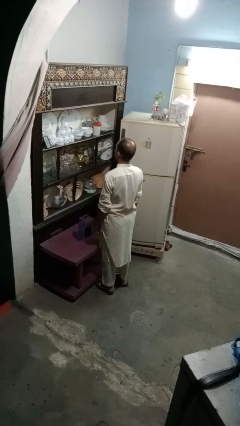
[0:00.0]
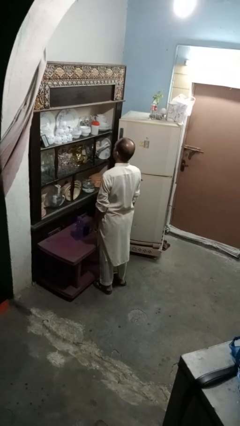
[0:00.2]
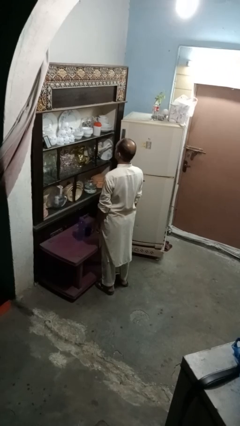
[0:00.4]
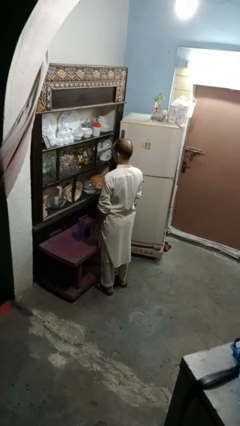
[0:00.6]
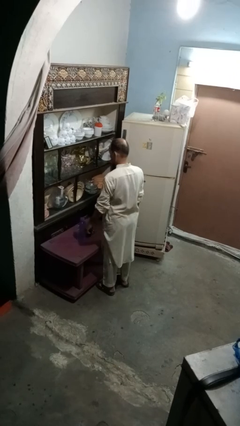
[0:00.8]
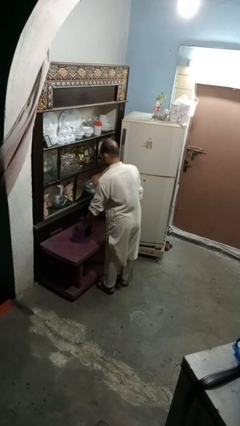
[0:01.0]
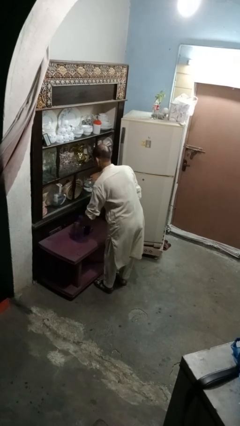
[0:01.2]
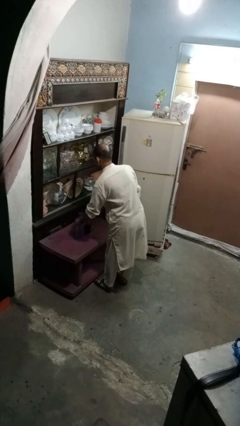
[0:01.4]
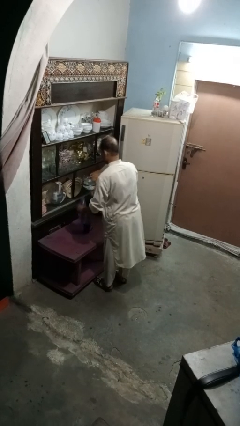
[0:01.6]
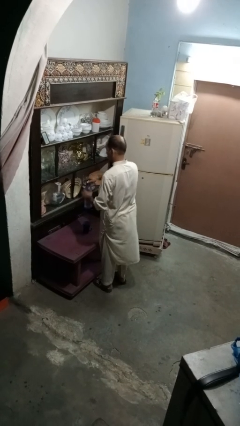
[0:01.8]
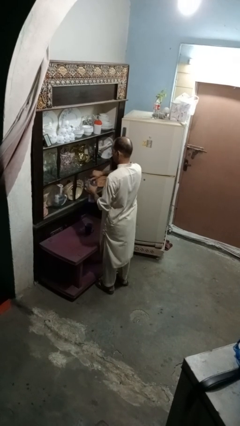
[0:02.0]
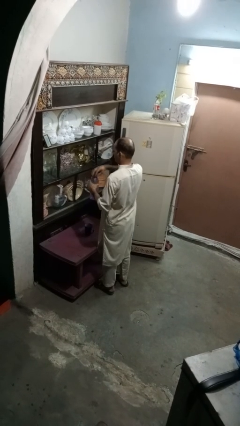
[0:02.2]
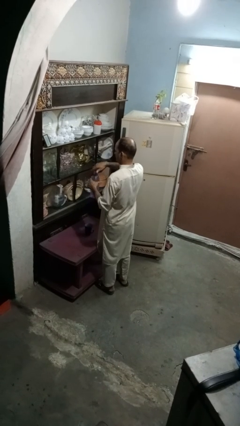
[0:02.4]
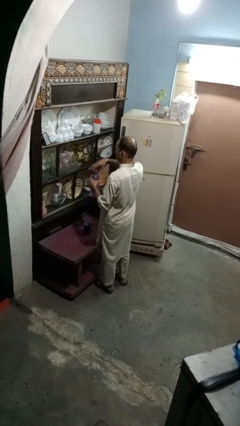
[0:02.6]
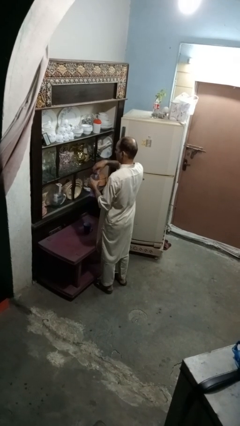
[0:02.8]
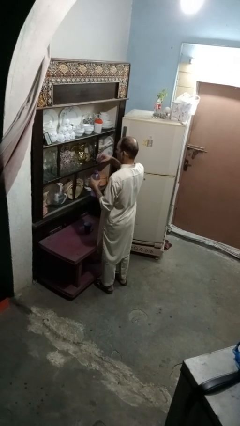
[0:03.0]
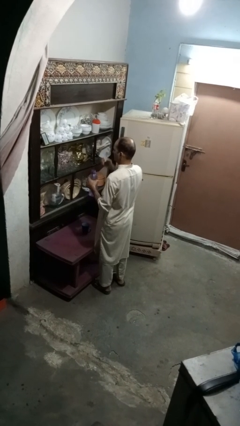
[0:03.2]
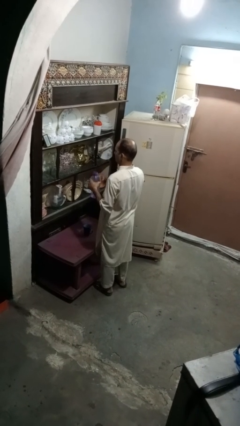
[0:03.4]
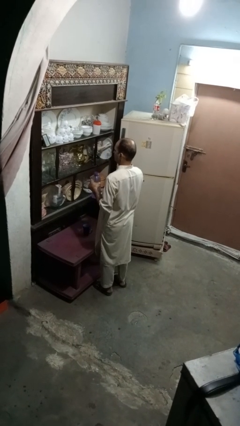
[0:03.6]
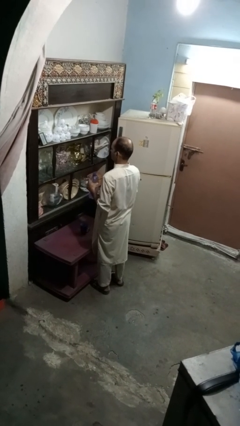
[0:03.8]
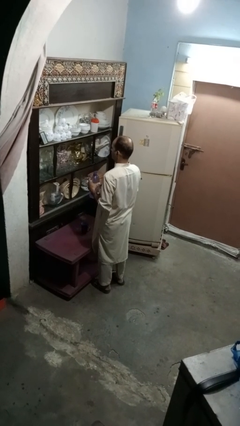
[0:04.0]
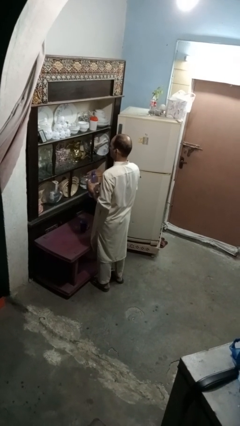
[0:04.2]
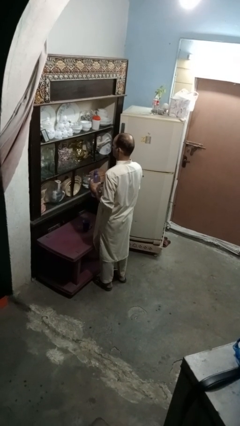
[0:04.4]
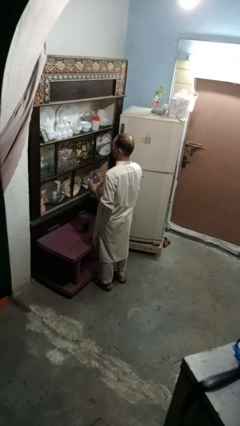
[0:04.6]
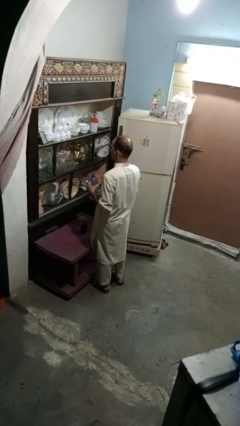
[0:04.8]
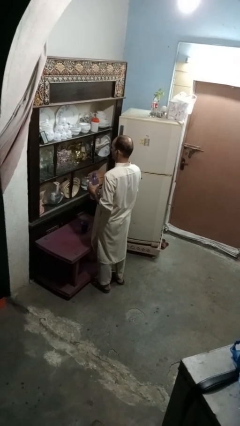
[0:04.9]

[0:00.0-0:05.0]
person unscrews lid from bottle

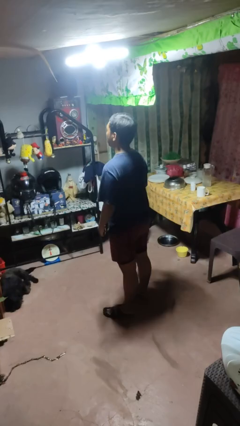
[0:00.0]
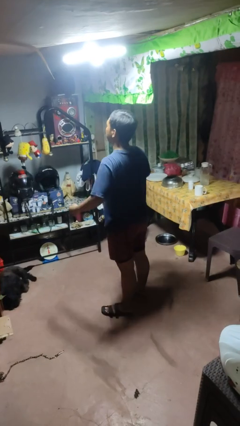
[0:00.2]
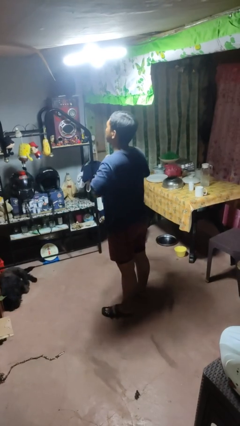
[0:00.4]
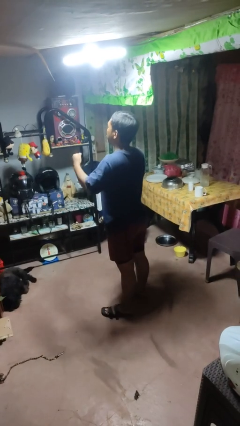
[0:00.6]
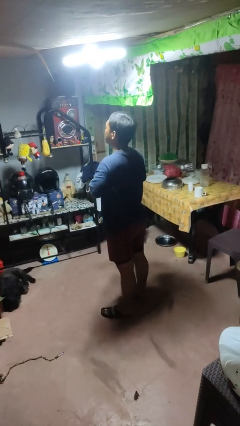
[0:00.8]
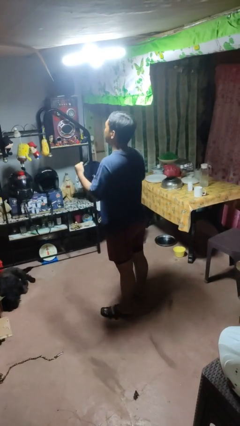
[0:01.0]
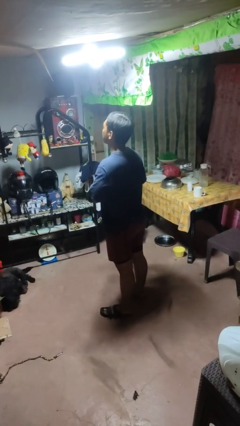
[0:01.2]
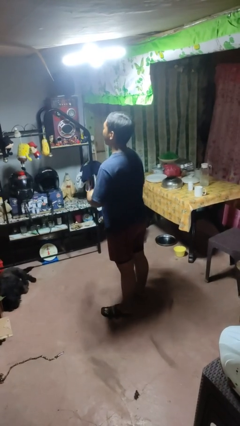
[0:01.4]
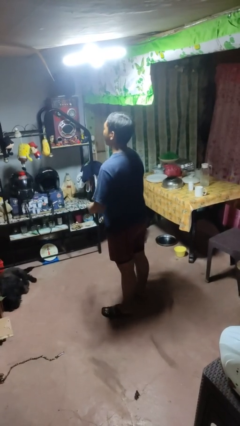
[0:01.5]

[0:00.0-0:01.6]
person drums on chest

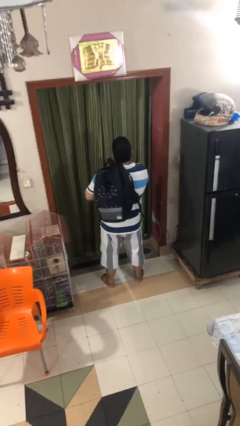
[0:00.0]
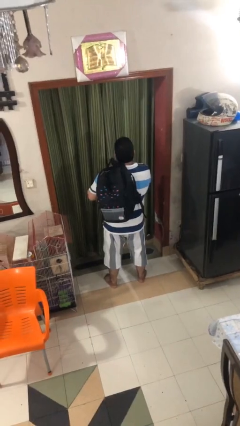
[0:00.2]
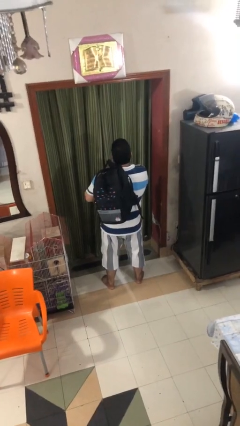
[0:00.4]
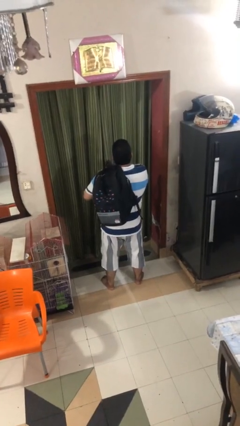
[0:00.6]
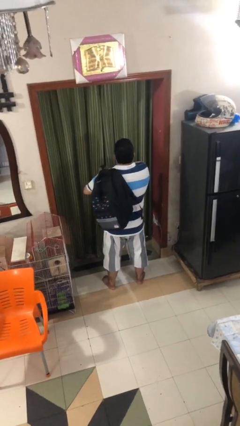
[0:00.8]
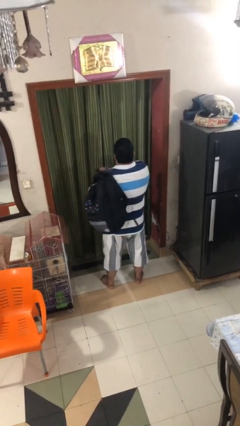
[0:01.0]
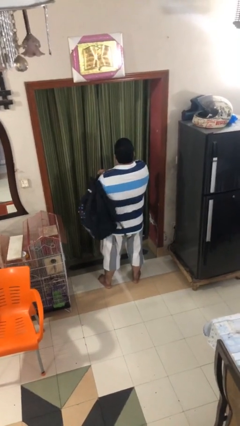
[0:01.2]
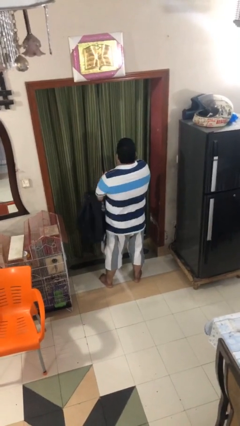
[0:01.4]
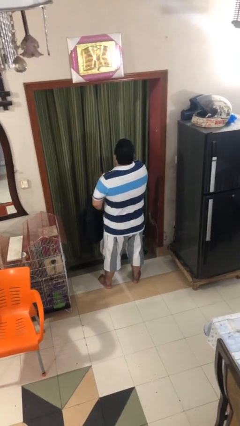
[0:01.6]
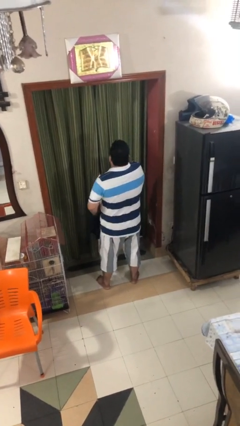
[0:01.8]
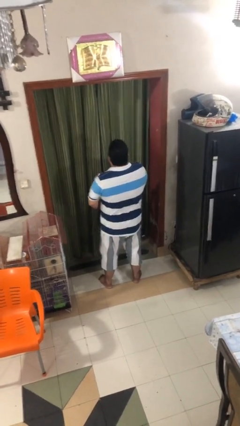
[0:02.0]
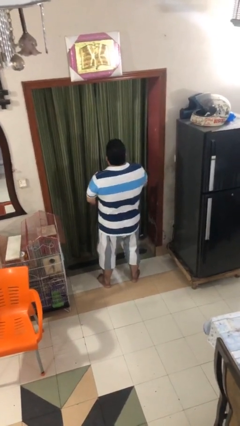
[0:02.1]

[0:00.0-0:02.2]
person takes off backpack

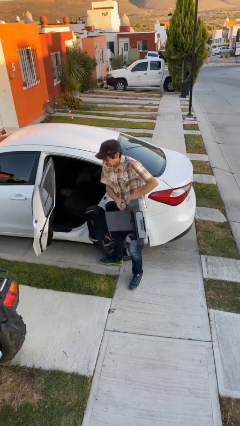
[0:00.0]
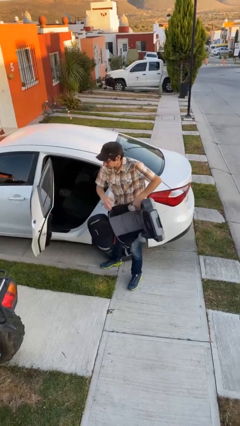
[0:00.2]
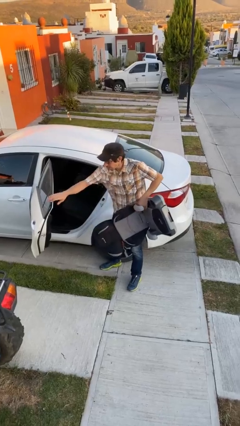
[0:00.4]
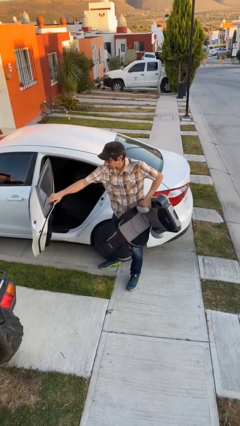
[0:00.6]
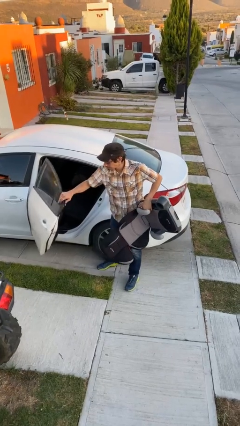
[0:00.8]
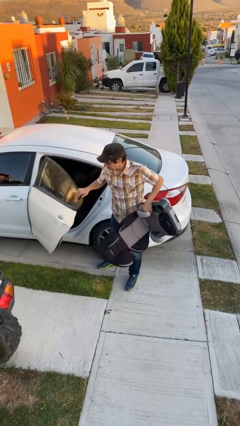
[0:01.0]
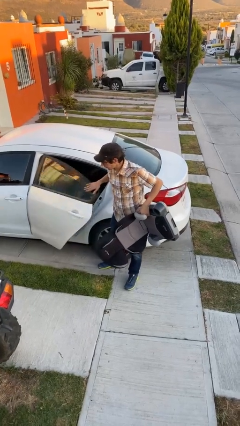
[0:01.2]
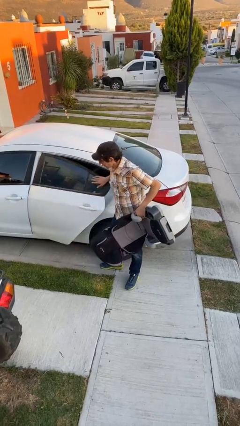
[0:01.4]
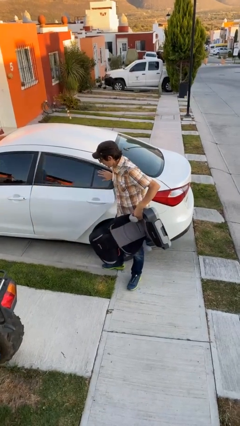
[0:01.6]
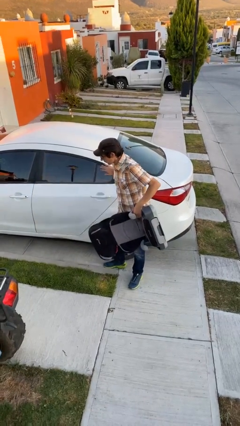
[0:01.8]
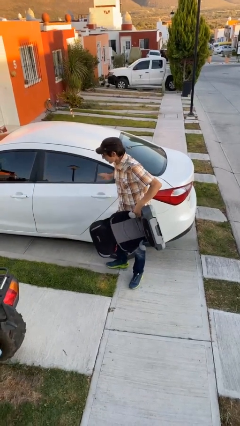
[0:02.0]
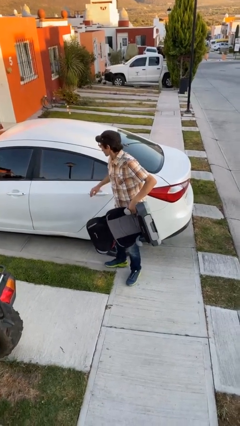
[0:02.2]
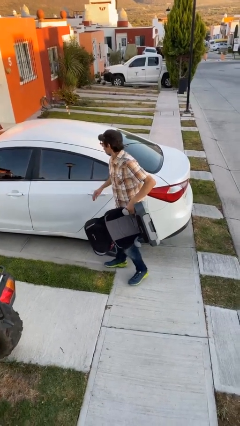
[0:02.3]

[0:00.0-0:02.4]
person closes car door

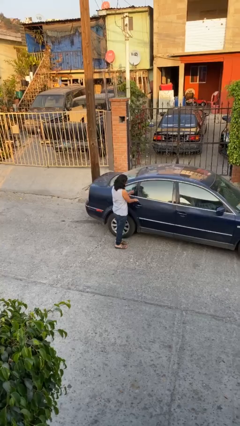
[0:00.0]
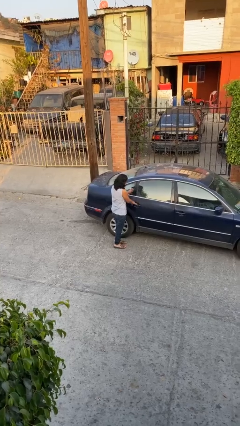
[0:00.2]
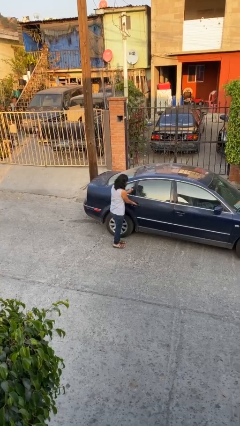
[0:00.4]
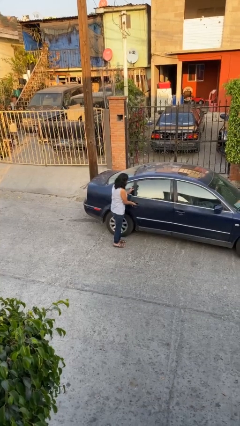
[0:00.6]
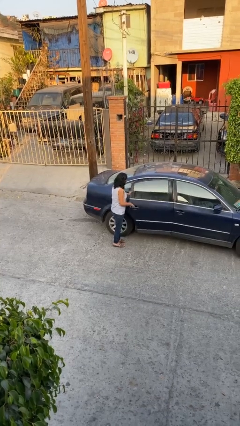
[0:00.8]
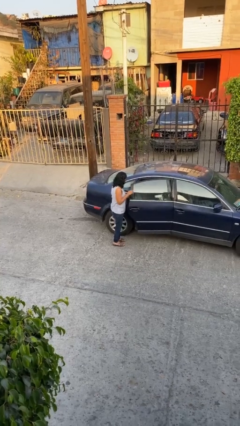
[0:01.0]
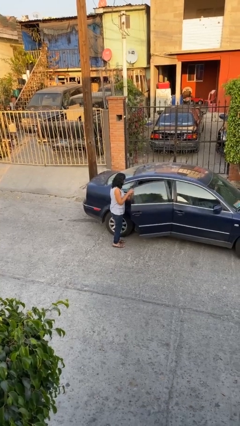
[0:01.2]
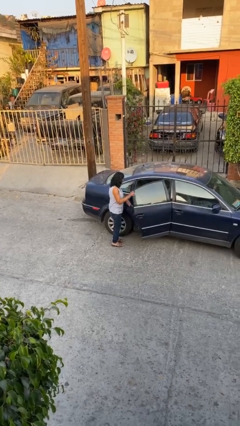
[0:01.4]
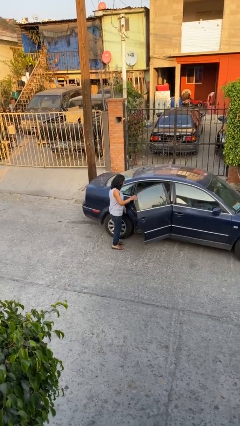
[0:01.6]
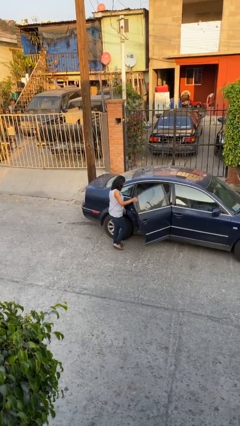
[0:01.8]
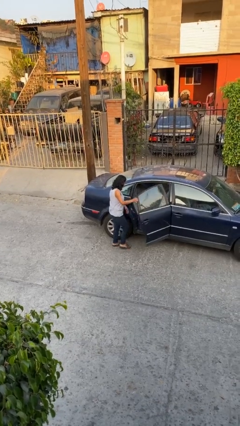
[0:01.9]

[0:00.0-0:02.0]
person opens car door

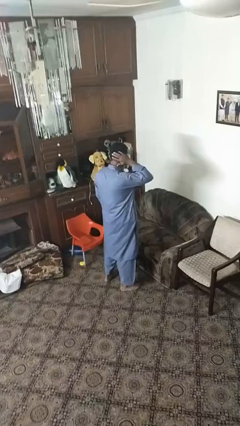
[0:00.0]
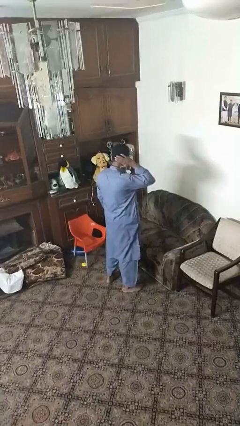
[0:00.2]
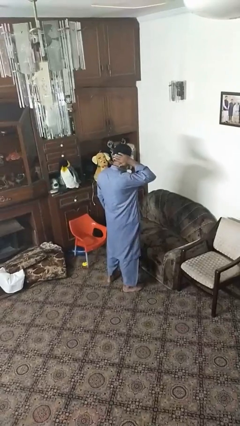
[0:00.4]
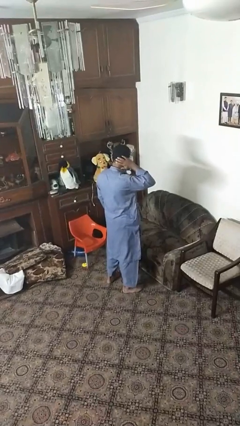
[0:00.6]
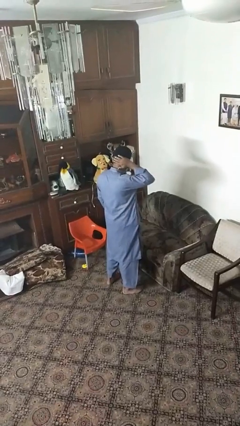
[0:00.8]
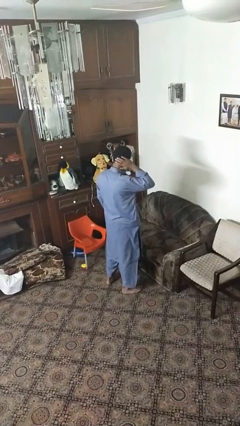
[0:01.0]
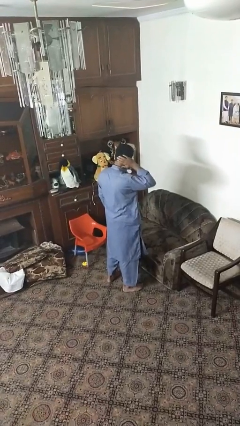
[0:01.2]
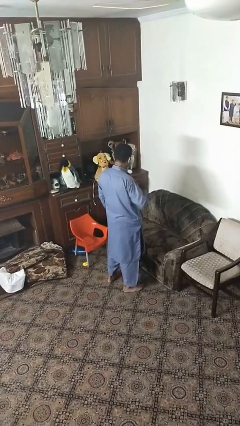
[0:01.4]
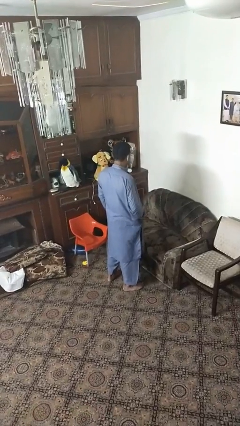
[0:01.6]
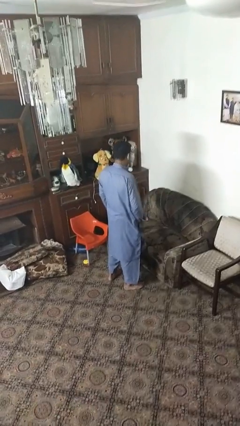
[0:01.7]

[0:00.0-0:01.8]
person strokes hair

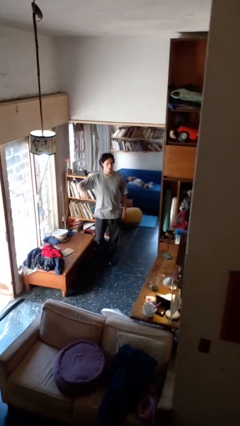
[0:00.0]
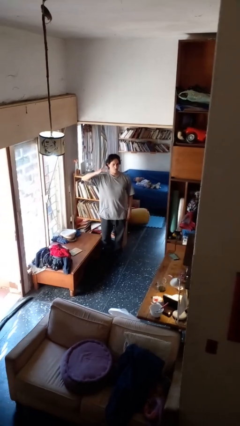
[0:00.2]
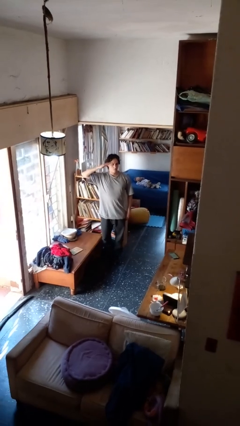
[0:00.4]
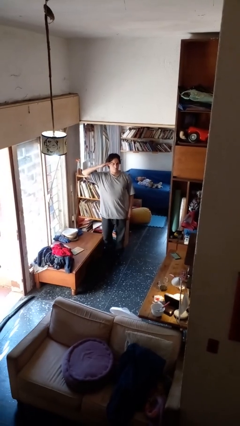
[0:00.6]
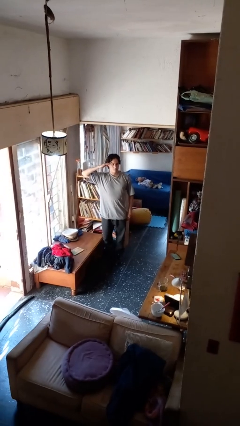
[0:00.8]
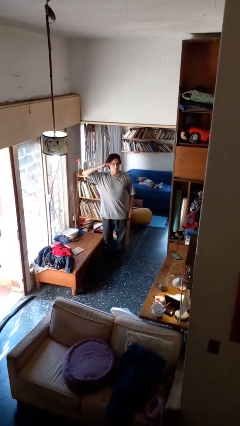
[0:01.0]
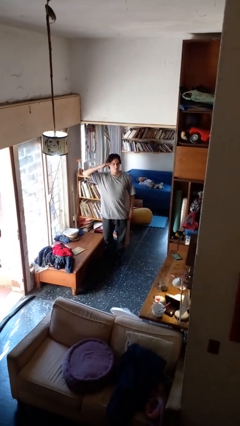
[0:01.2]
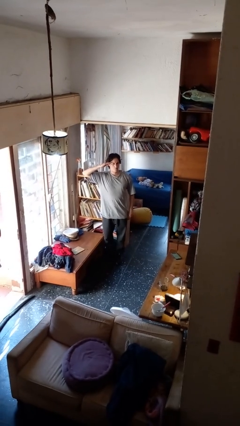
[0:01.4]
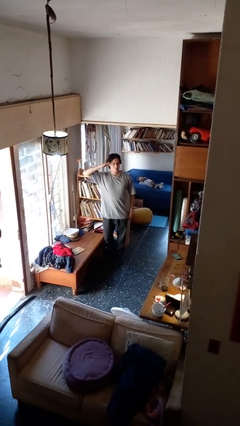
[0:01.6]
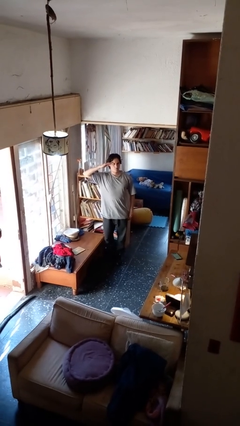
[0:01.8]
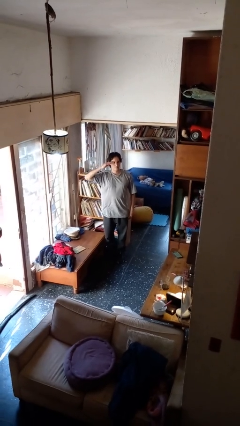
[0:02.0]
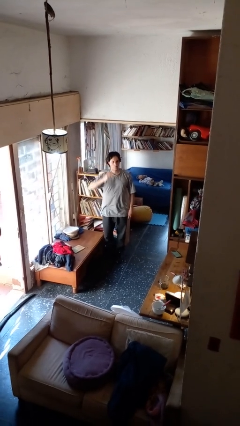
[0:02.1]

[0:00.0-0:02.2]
person salutes
